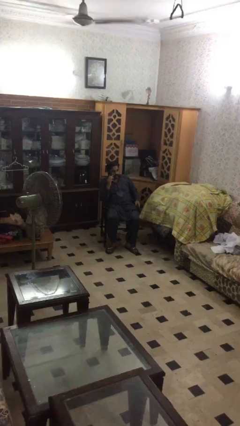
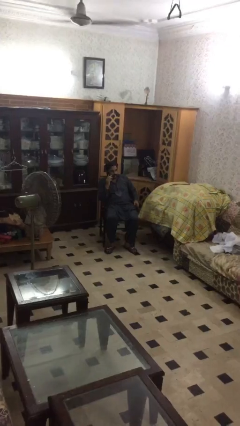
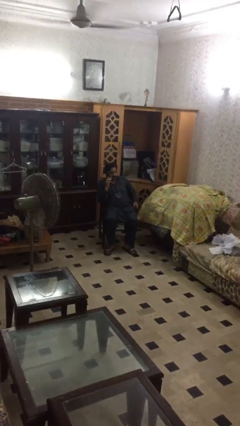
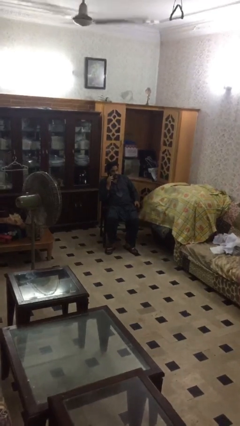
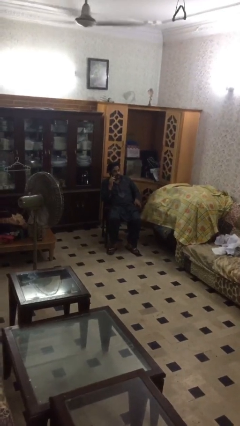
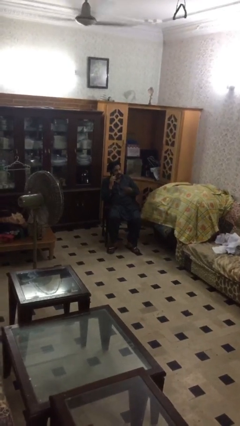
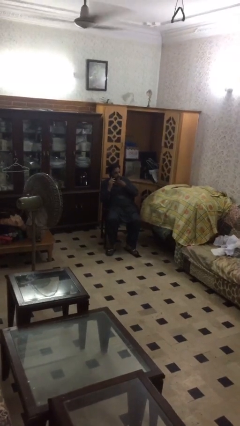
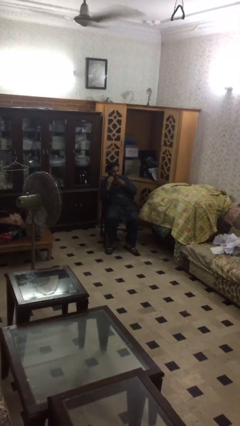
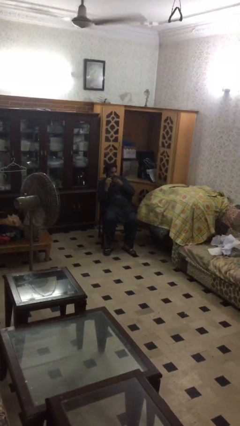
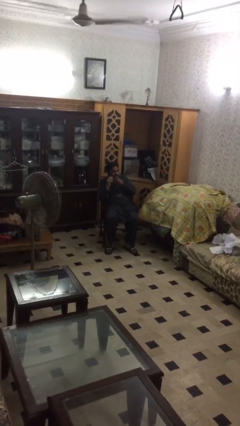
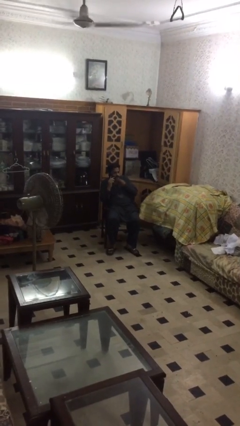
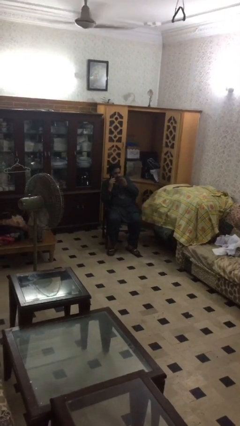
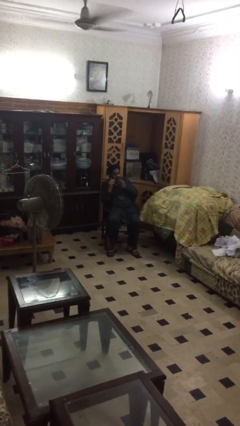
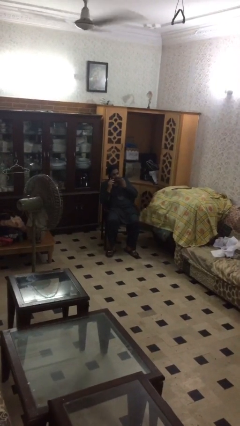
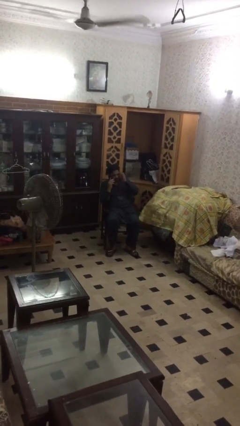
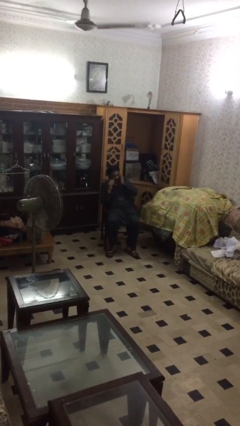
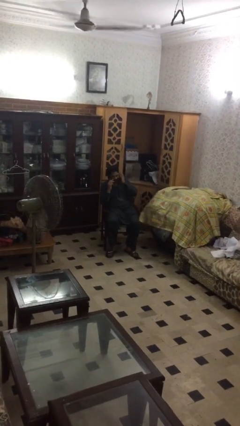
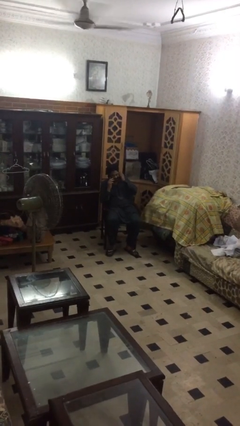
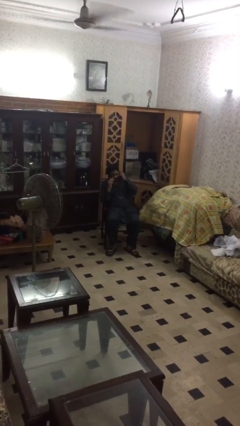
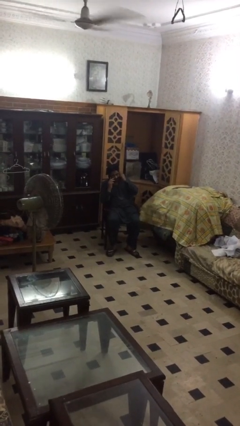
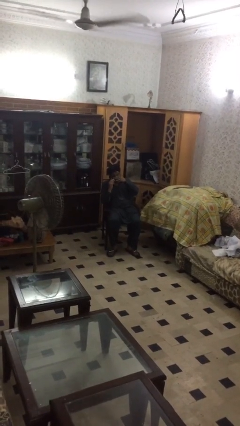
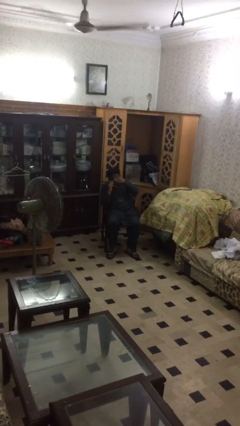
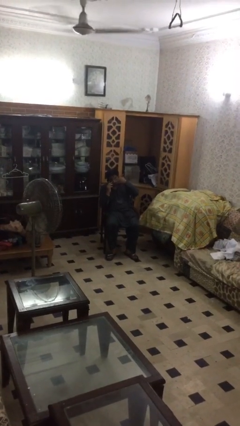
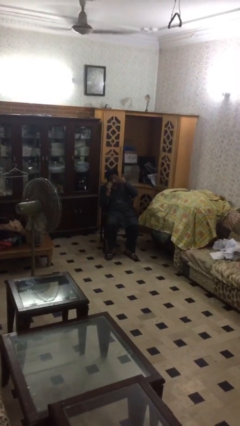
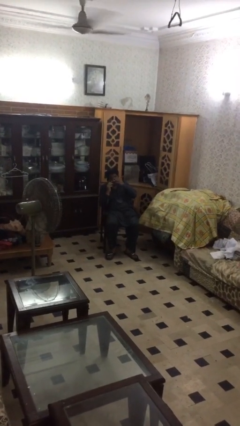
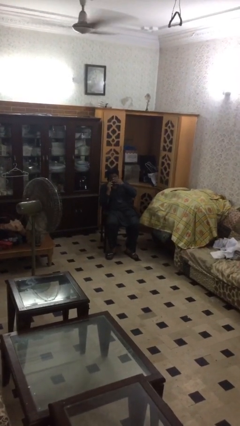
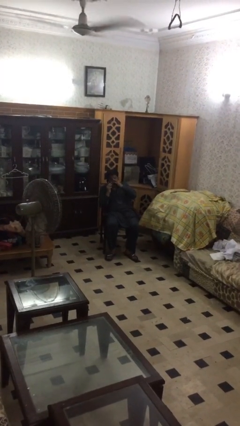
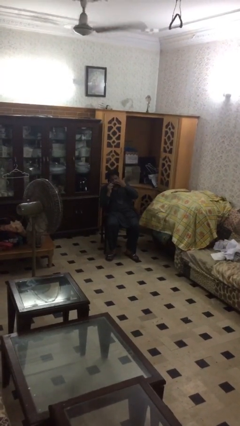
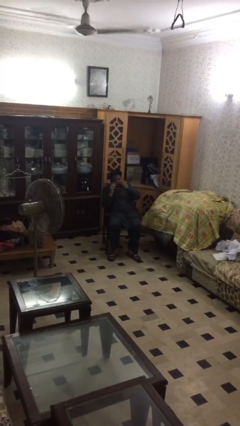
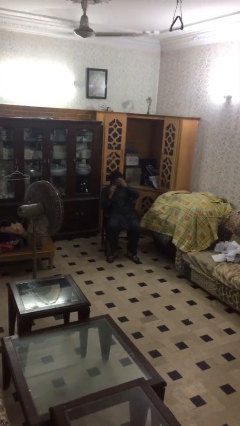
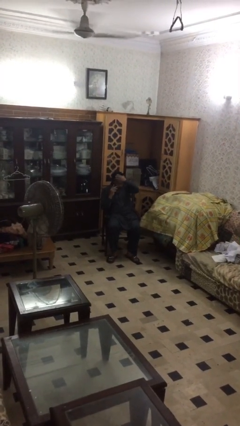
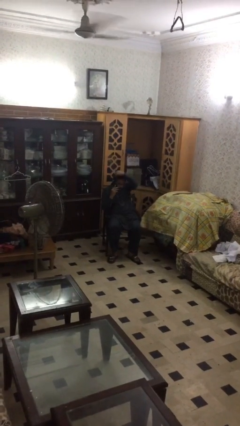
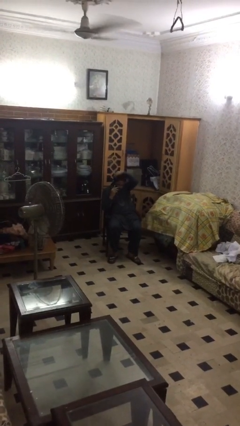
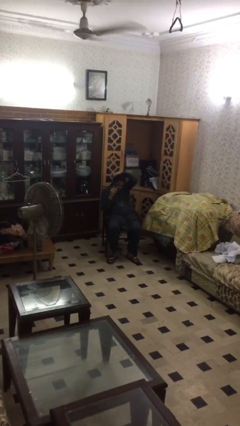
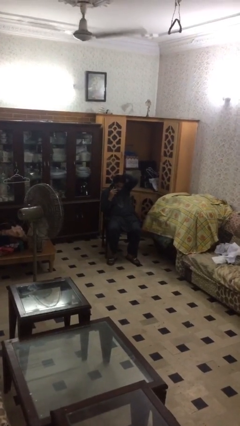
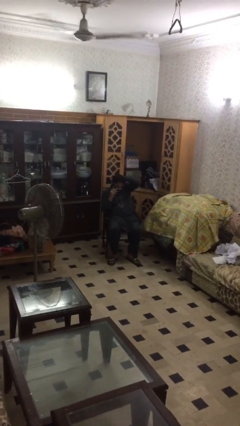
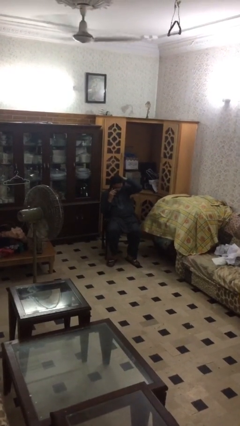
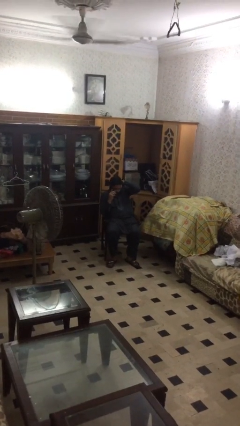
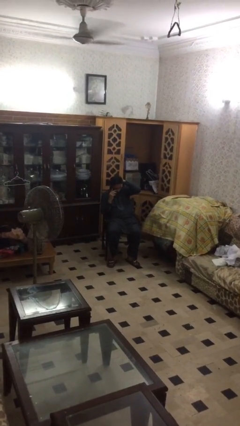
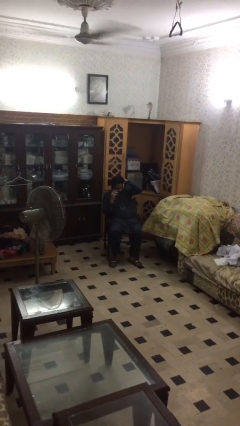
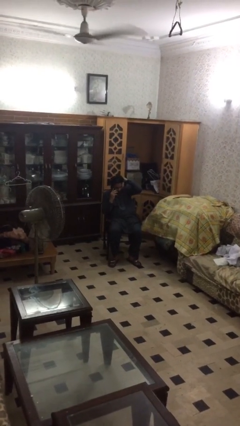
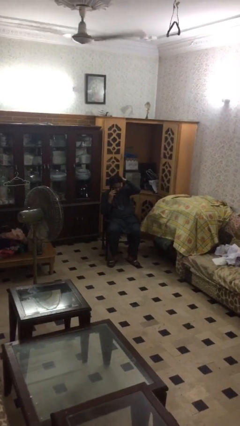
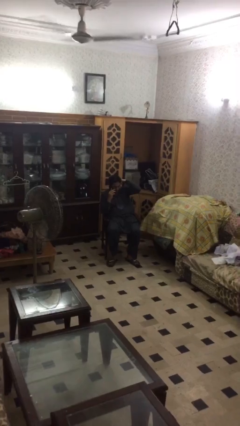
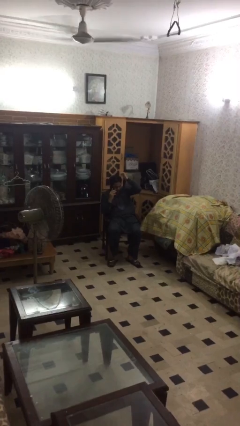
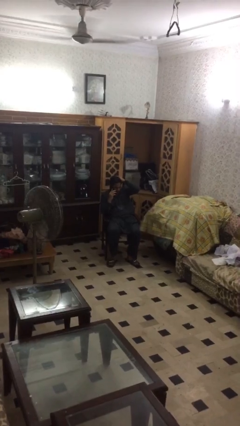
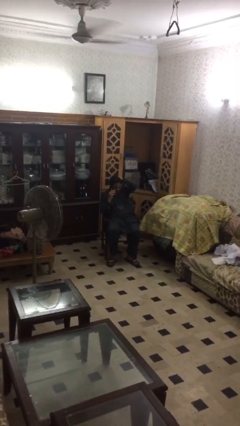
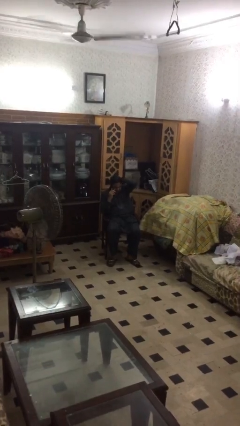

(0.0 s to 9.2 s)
person talks on phone

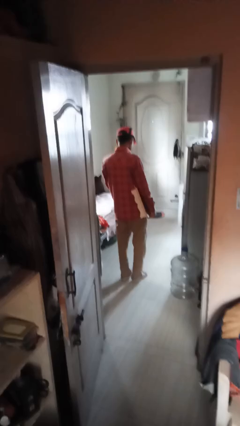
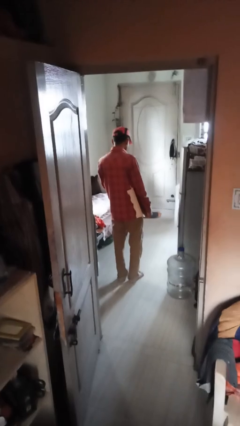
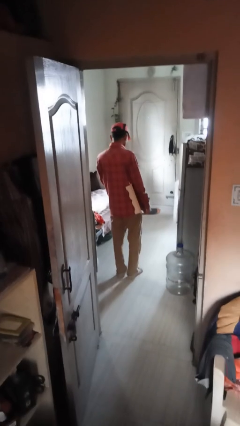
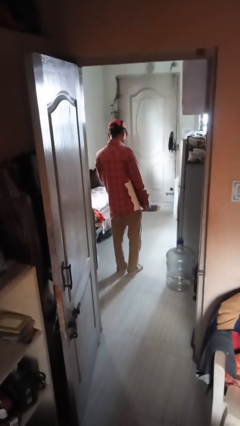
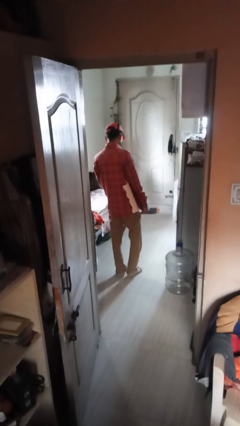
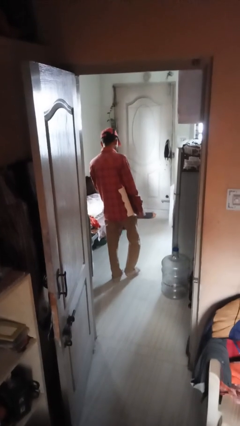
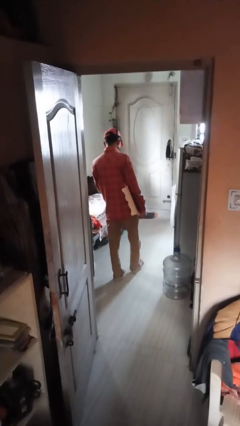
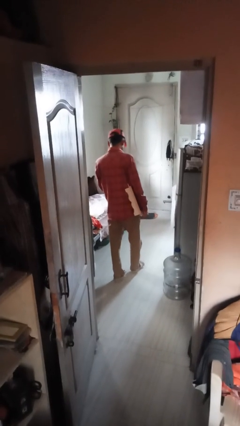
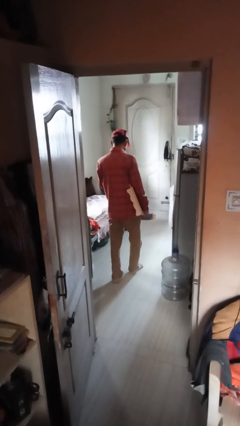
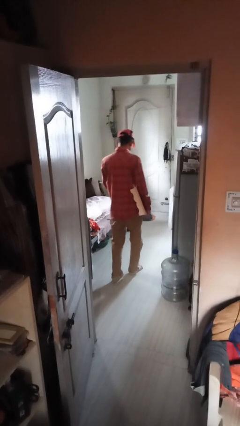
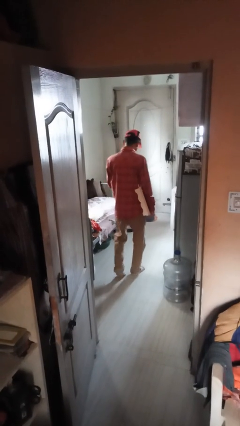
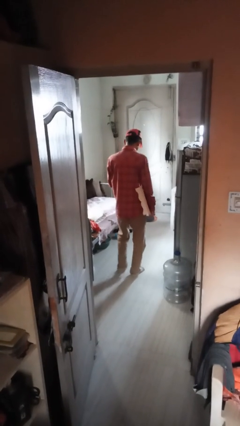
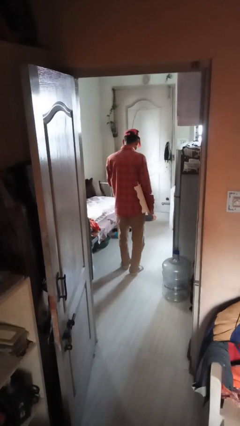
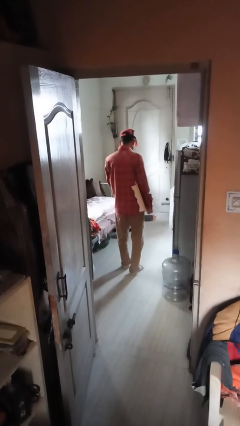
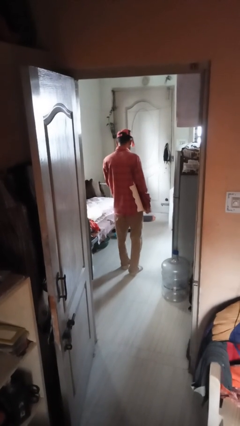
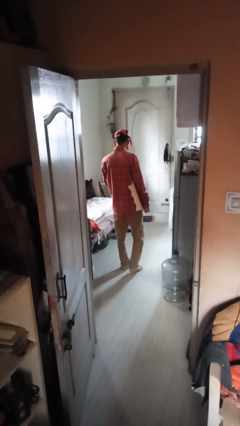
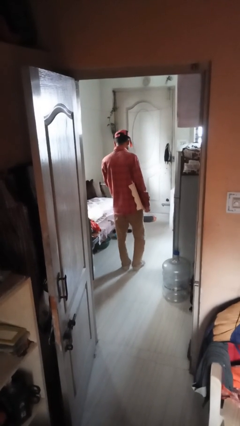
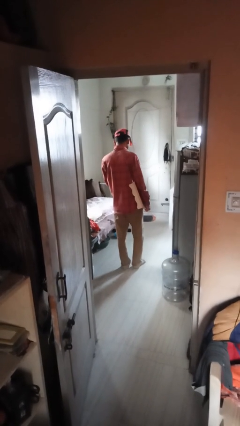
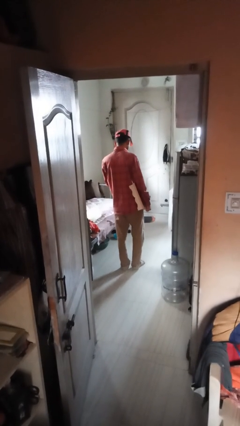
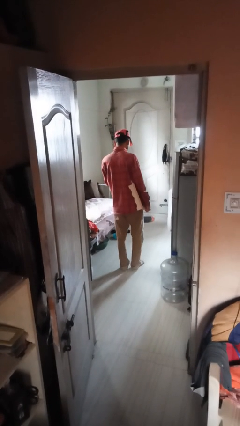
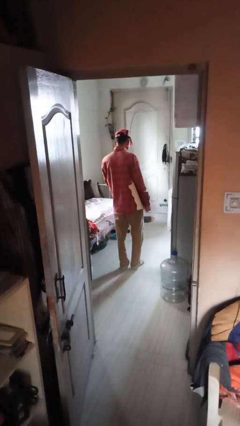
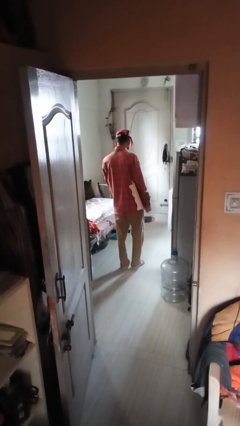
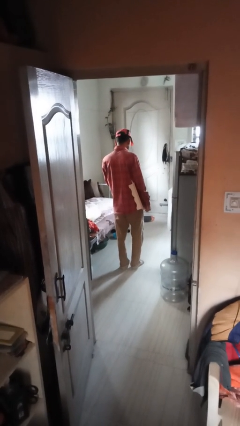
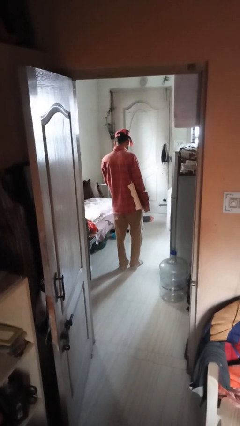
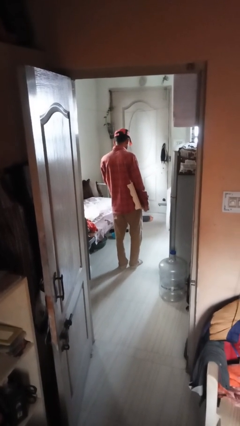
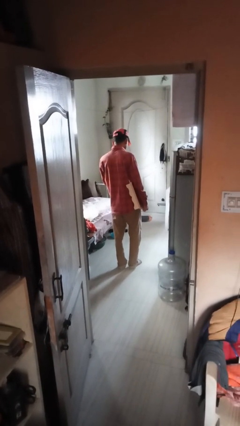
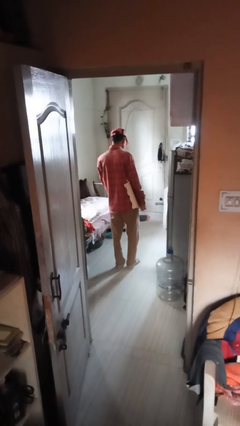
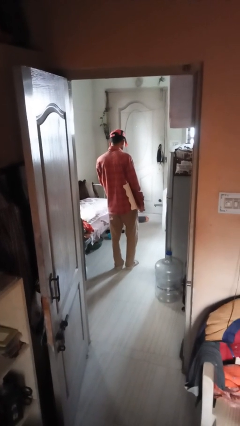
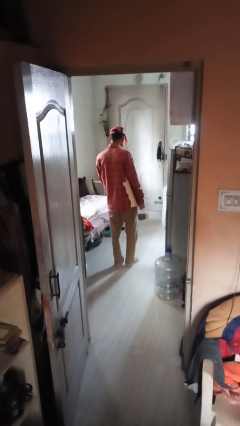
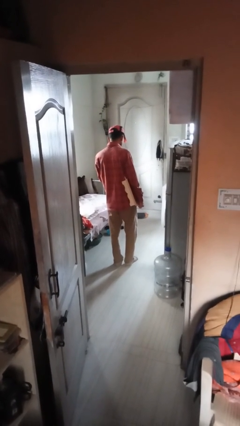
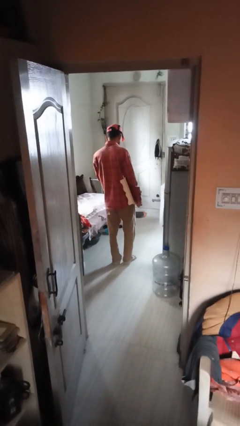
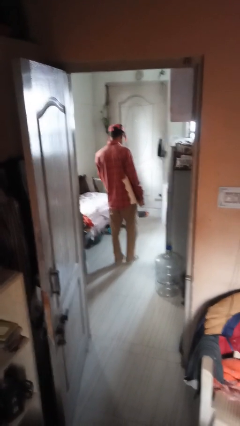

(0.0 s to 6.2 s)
person carries furniture

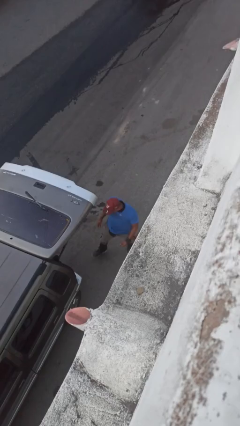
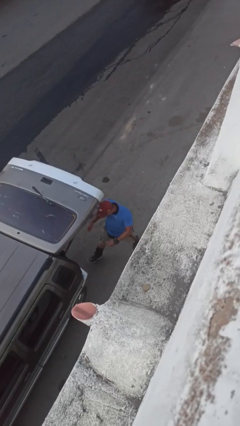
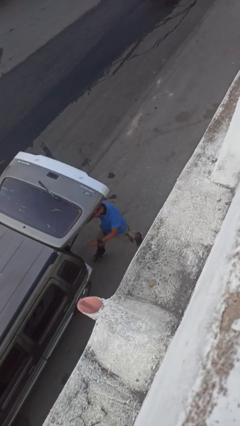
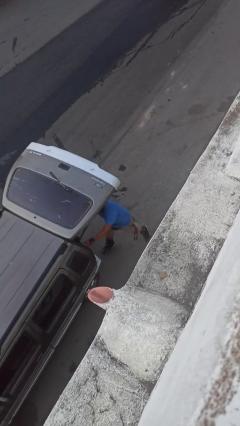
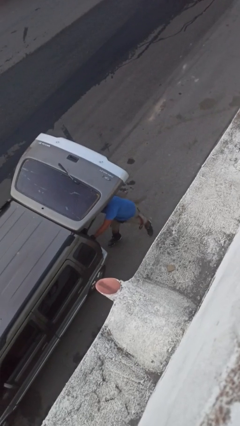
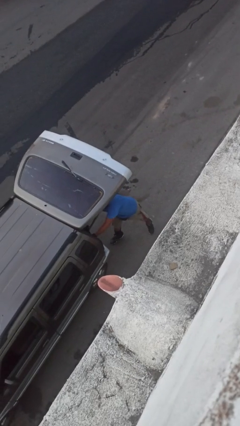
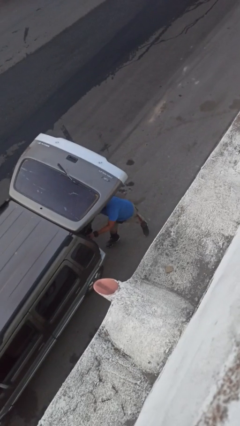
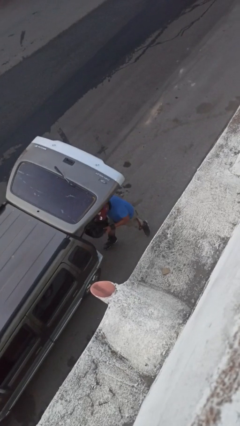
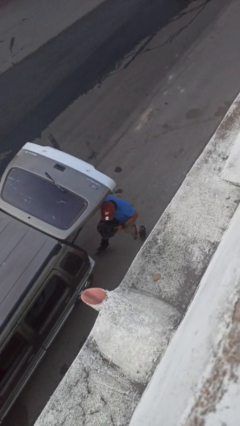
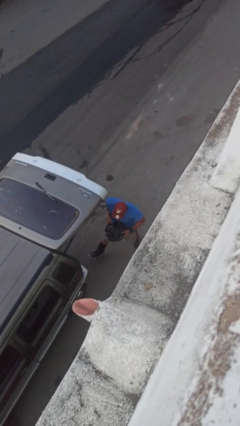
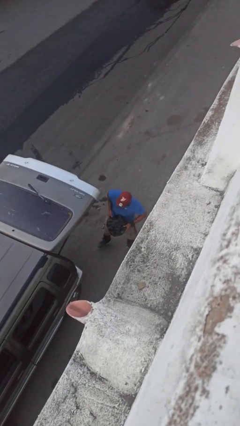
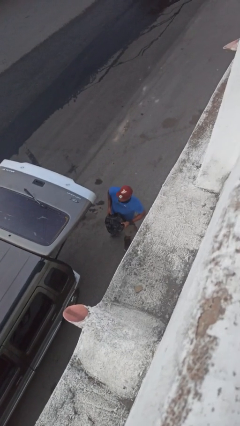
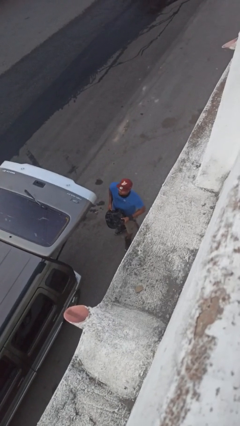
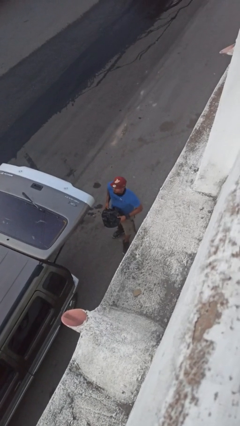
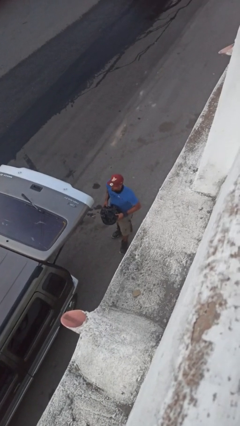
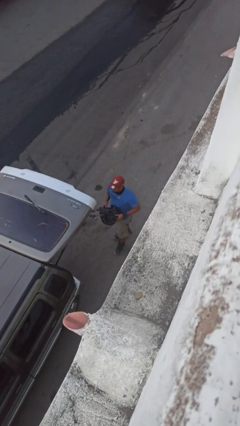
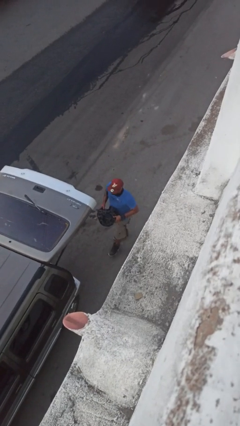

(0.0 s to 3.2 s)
person unloads car
